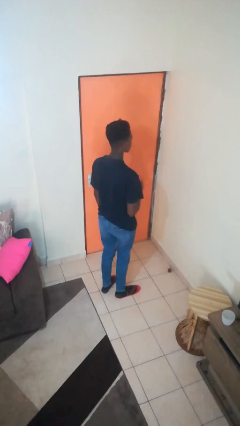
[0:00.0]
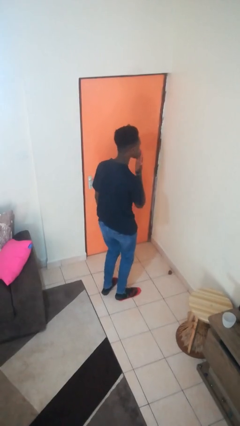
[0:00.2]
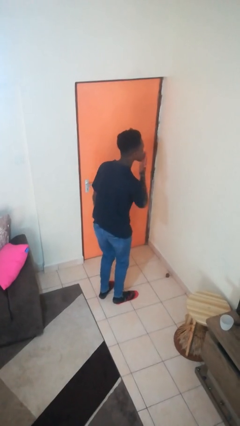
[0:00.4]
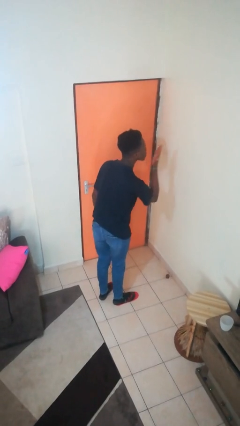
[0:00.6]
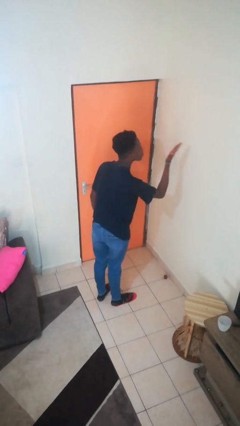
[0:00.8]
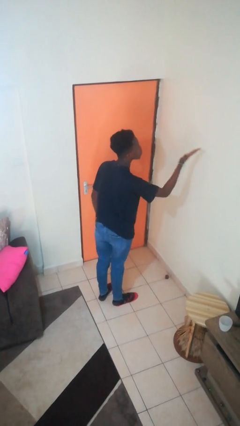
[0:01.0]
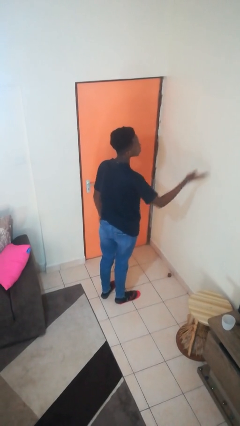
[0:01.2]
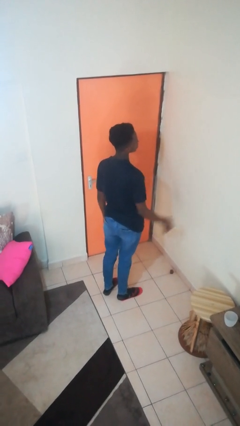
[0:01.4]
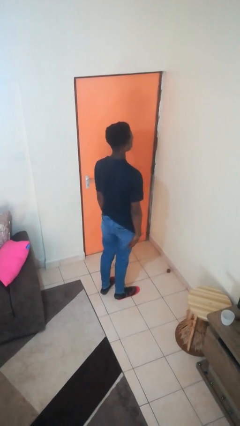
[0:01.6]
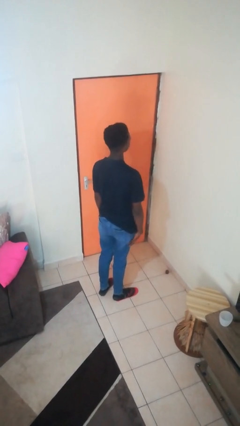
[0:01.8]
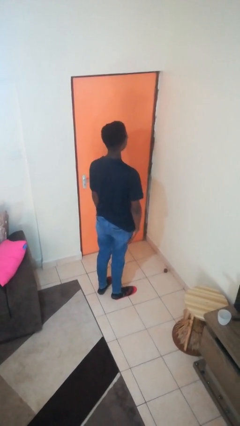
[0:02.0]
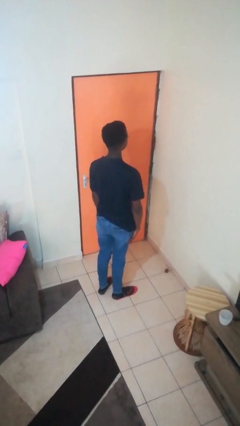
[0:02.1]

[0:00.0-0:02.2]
person gestures blow kiss

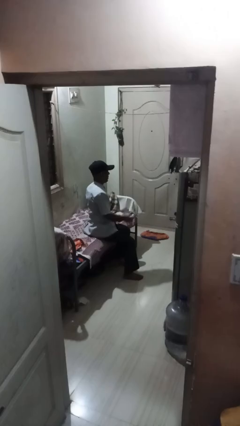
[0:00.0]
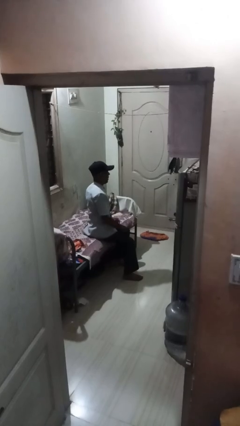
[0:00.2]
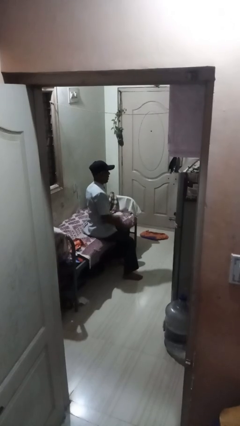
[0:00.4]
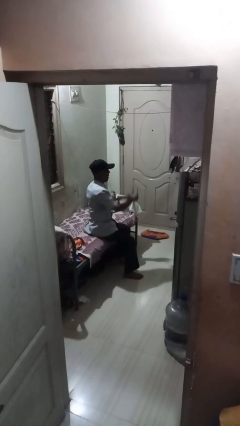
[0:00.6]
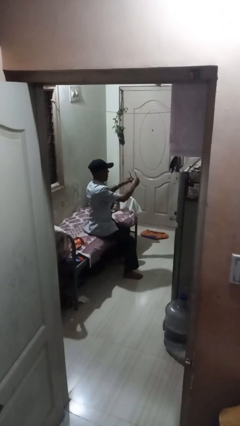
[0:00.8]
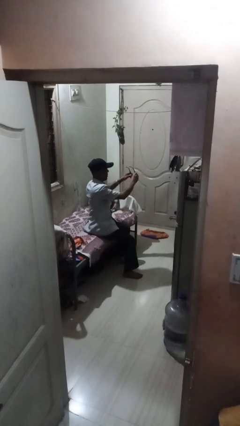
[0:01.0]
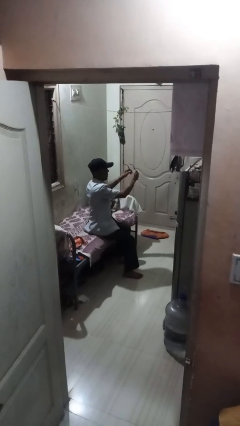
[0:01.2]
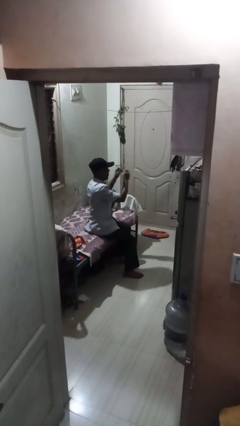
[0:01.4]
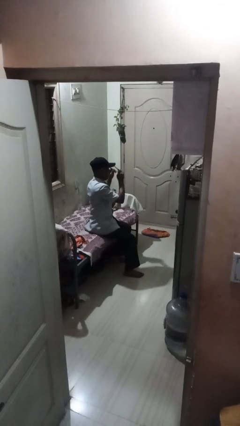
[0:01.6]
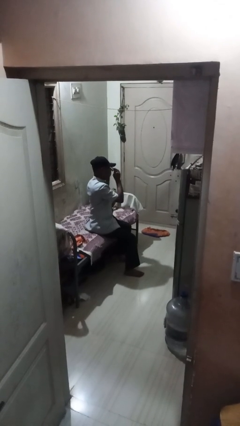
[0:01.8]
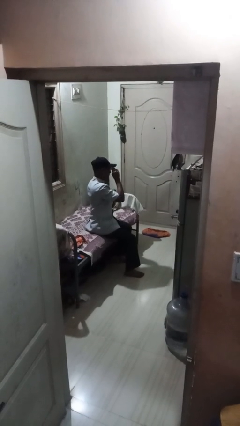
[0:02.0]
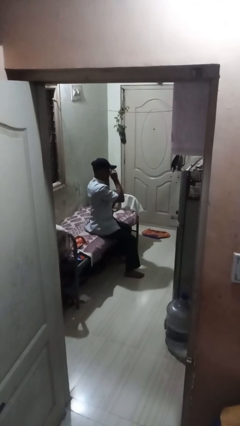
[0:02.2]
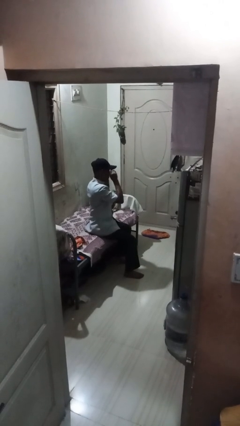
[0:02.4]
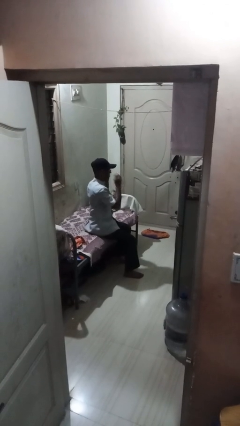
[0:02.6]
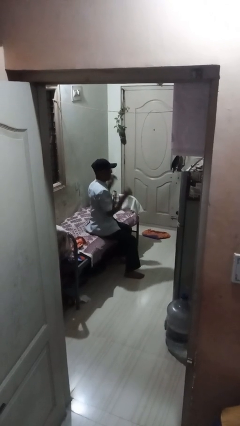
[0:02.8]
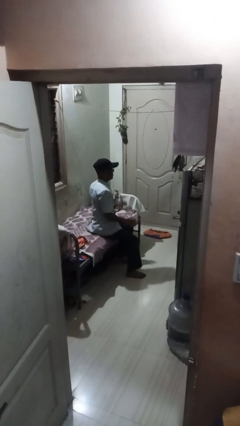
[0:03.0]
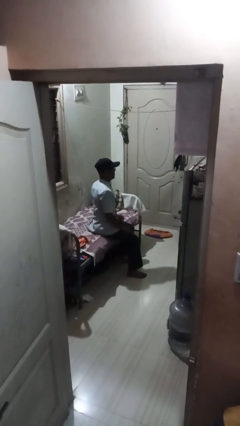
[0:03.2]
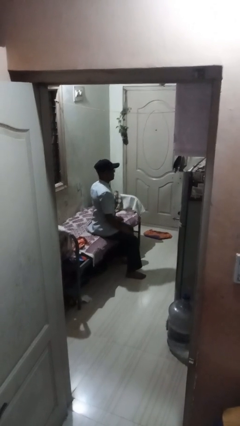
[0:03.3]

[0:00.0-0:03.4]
person puts on glasses

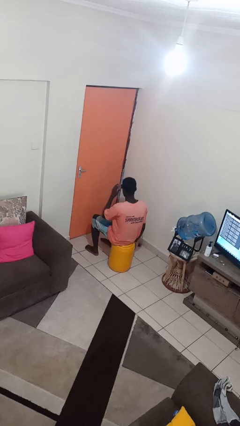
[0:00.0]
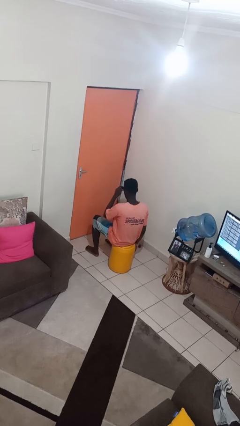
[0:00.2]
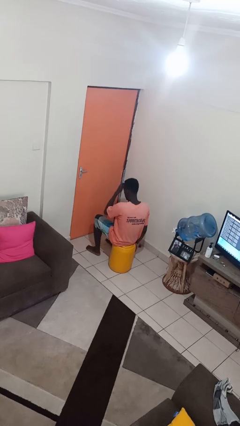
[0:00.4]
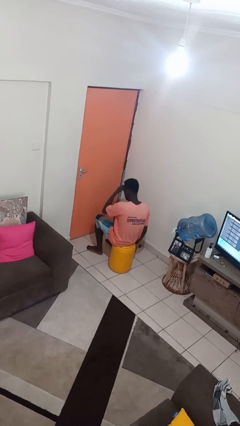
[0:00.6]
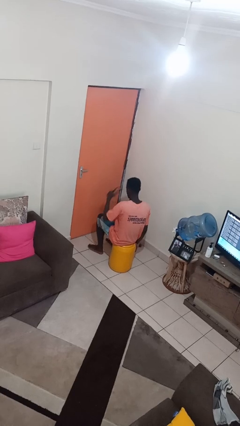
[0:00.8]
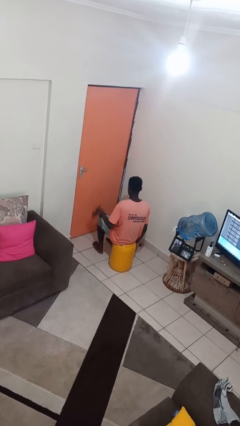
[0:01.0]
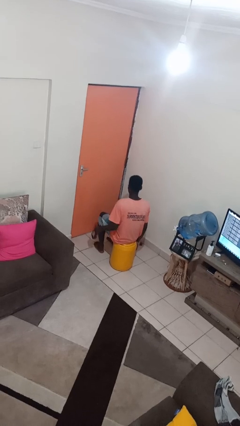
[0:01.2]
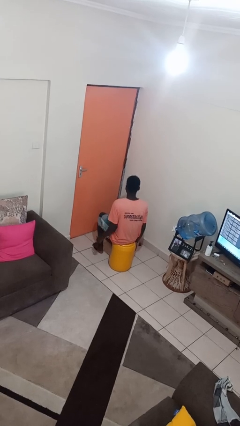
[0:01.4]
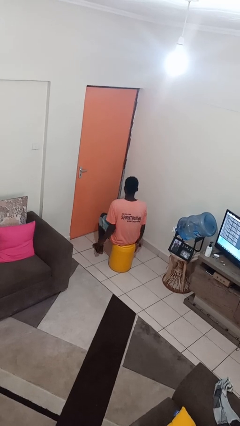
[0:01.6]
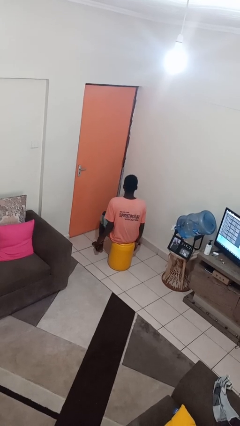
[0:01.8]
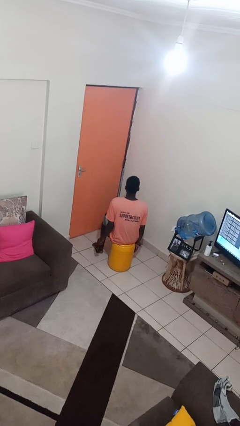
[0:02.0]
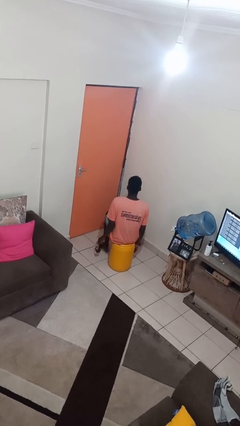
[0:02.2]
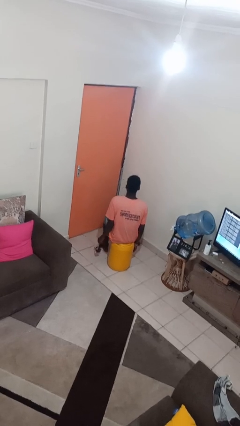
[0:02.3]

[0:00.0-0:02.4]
person takes off sunglasses

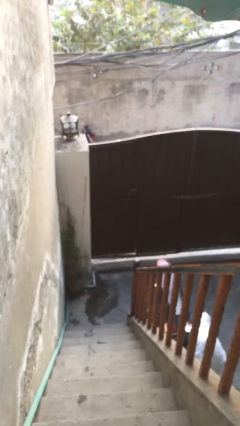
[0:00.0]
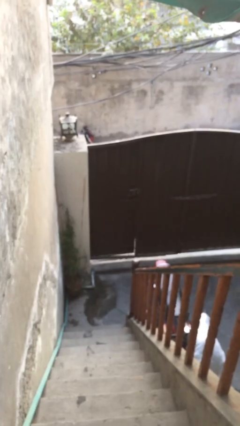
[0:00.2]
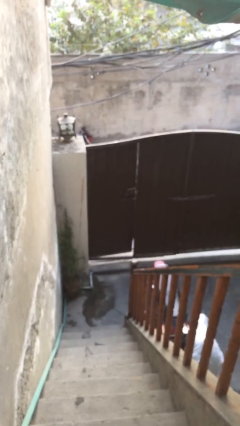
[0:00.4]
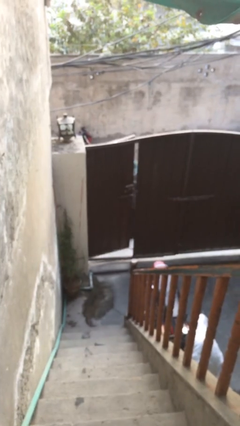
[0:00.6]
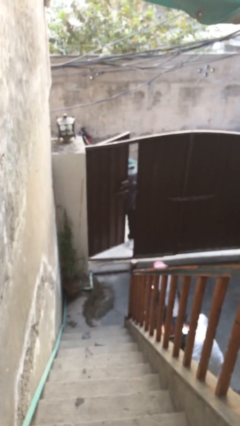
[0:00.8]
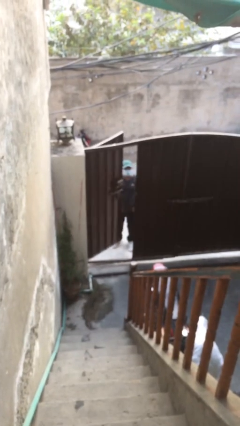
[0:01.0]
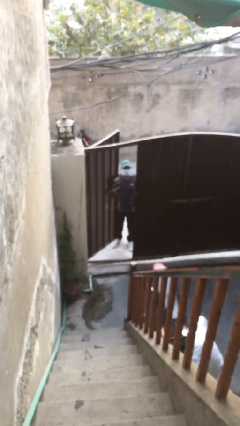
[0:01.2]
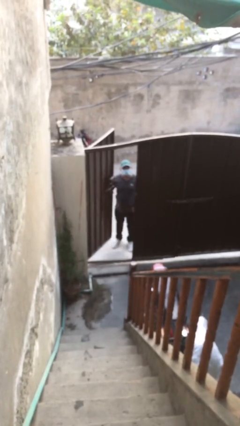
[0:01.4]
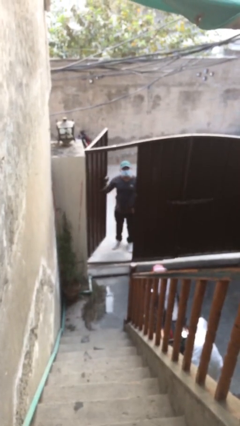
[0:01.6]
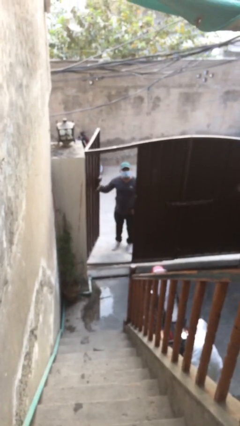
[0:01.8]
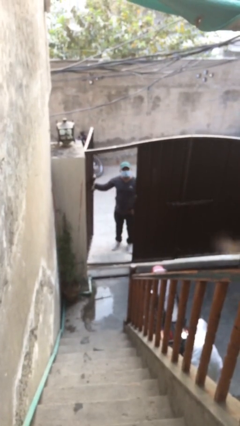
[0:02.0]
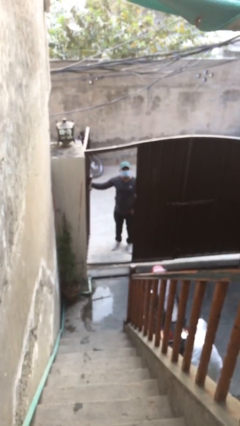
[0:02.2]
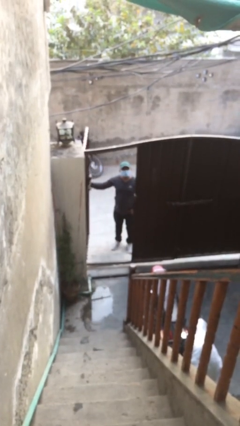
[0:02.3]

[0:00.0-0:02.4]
person opens facility door

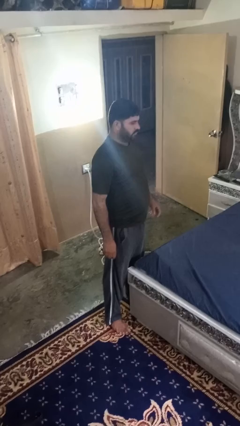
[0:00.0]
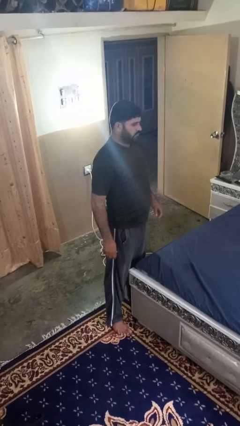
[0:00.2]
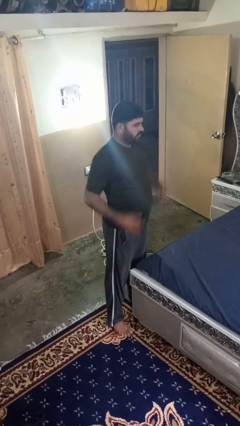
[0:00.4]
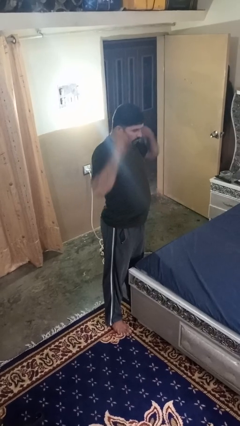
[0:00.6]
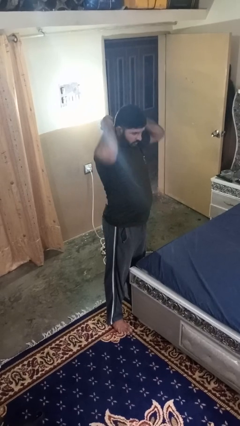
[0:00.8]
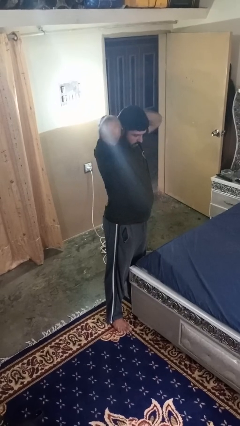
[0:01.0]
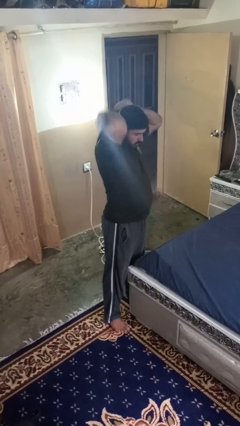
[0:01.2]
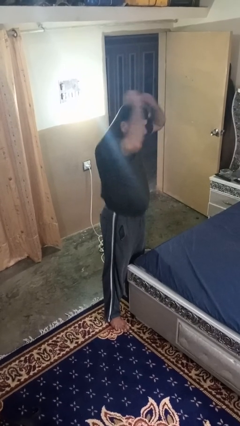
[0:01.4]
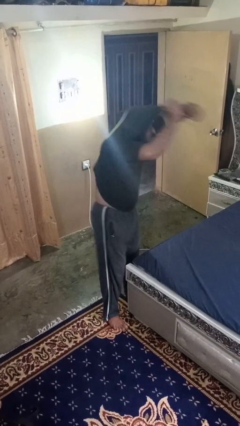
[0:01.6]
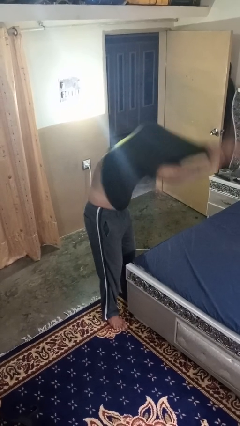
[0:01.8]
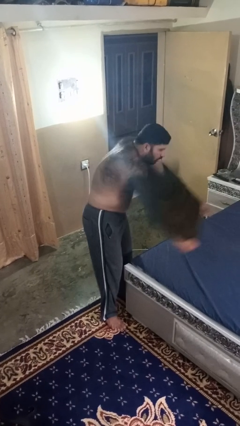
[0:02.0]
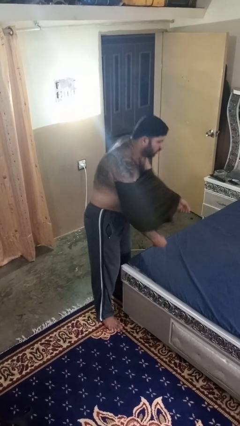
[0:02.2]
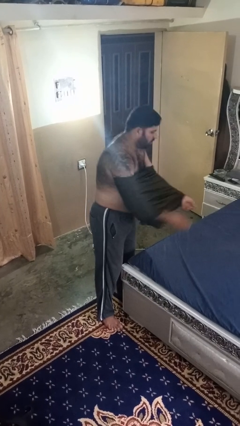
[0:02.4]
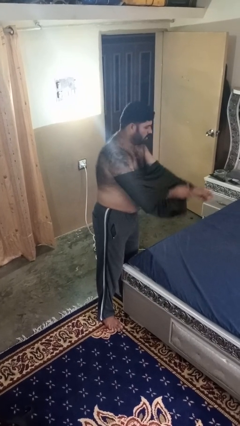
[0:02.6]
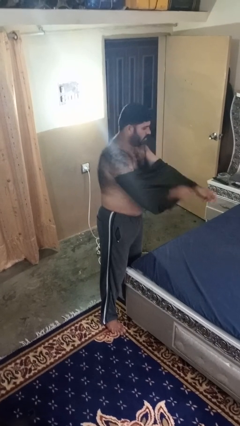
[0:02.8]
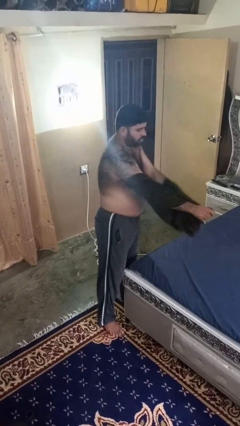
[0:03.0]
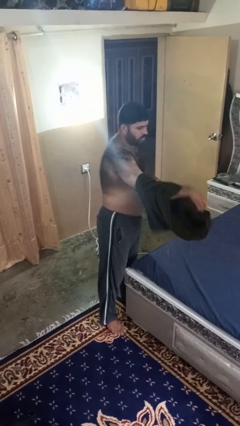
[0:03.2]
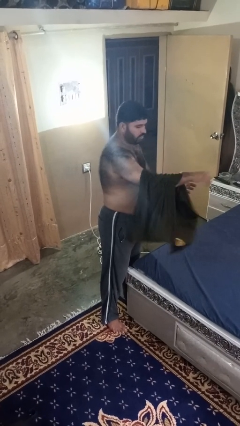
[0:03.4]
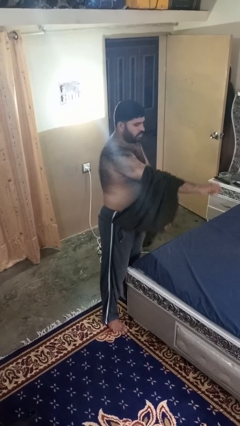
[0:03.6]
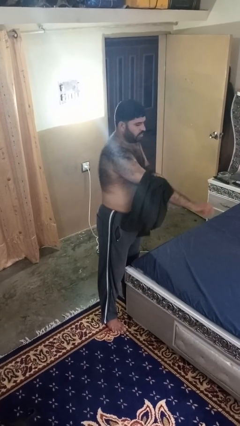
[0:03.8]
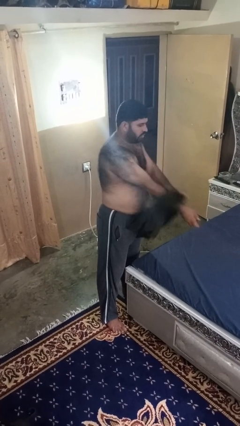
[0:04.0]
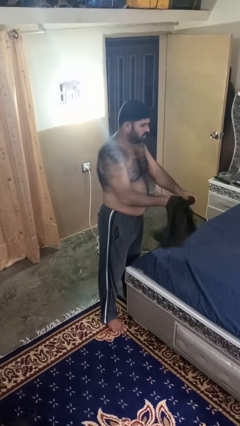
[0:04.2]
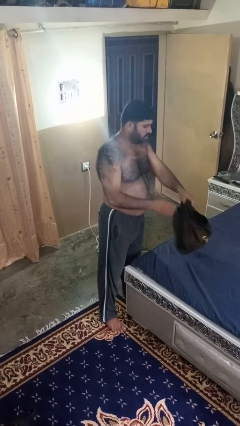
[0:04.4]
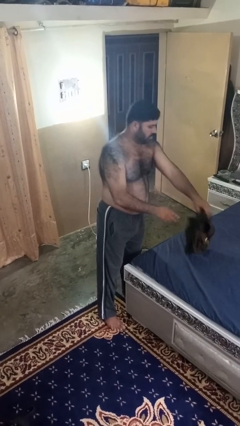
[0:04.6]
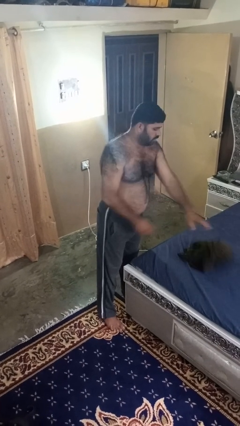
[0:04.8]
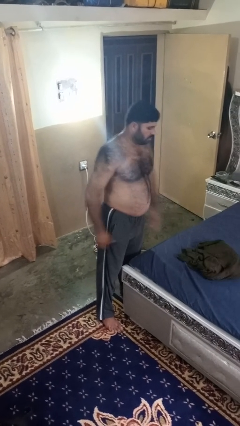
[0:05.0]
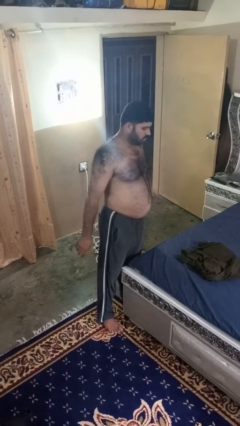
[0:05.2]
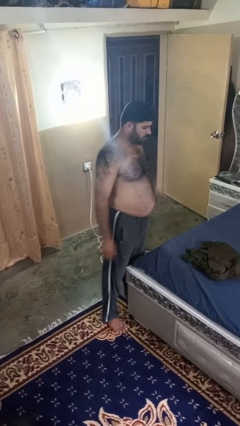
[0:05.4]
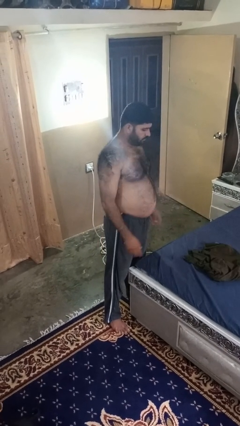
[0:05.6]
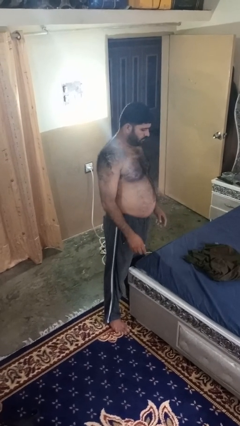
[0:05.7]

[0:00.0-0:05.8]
person takes off shirt

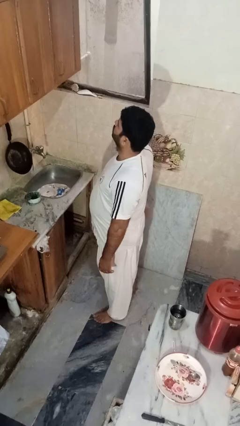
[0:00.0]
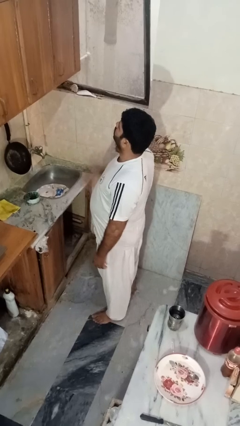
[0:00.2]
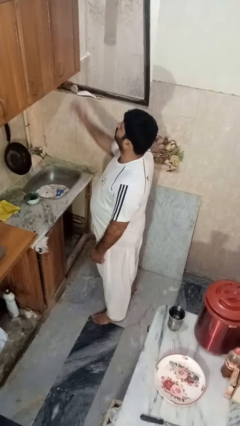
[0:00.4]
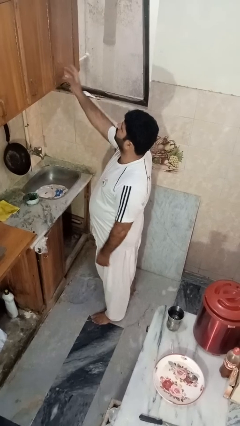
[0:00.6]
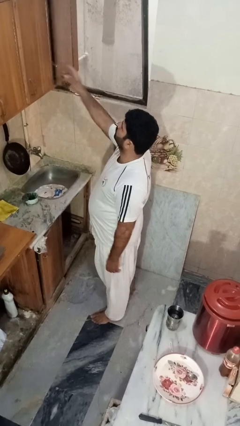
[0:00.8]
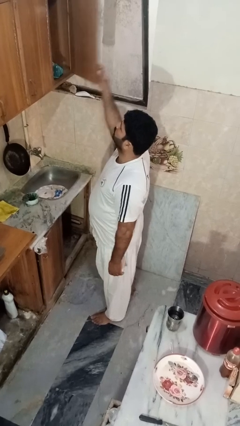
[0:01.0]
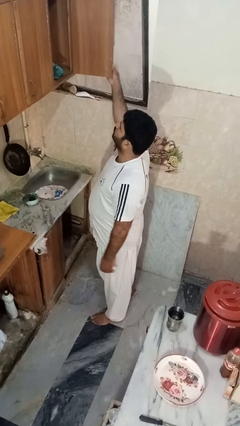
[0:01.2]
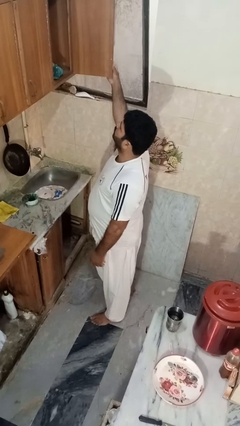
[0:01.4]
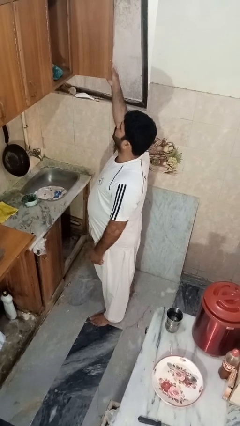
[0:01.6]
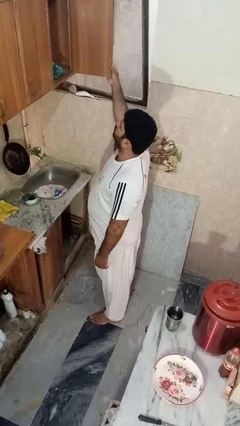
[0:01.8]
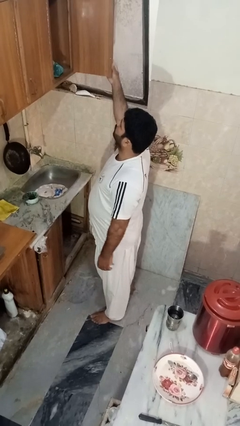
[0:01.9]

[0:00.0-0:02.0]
person opens cabinet
